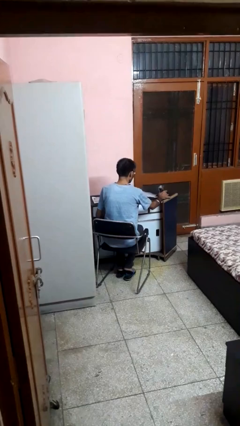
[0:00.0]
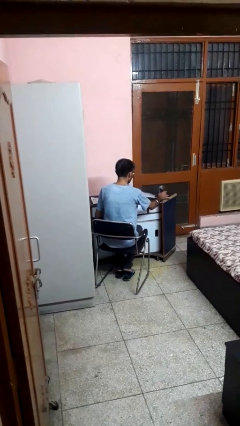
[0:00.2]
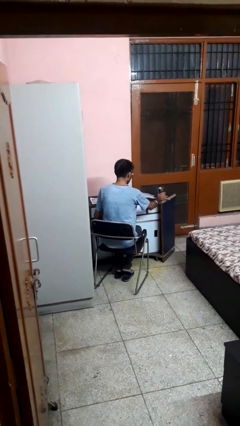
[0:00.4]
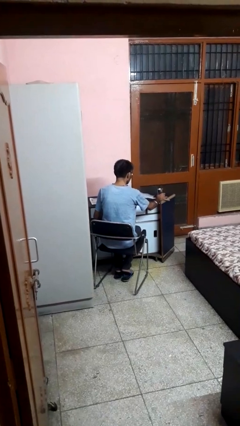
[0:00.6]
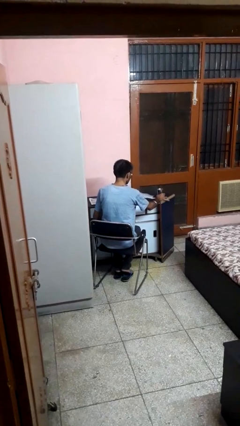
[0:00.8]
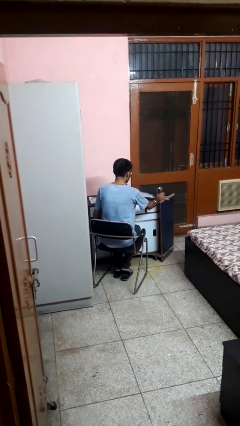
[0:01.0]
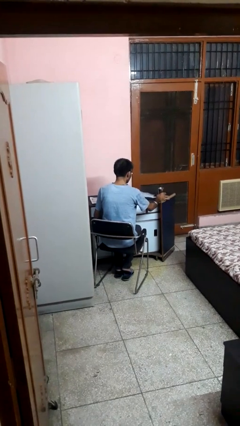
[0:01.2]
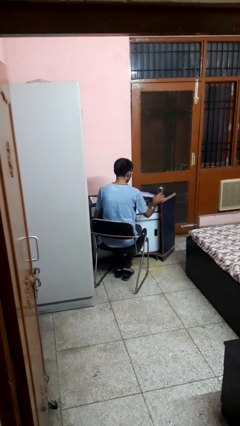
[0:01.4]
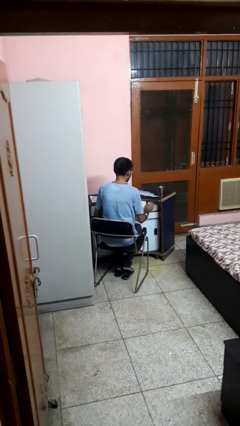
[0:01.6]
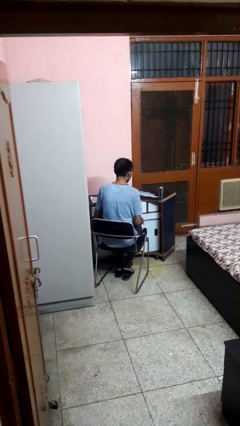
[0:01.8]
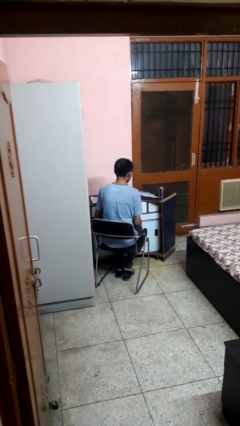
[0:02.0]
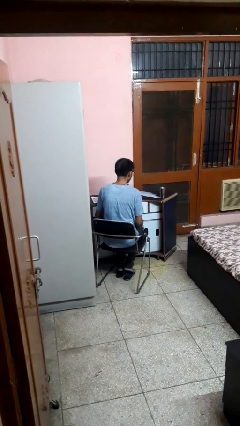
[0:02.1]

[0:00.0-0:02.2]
person sets upright glass

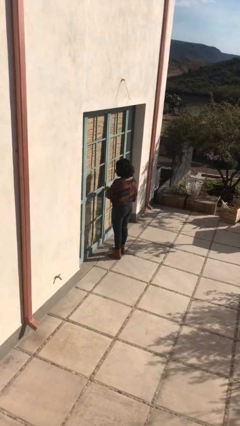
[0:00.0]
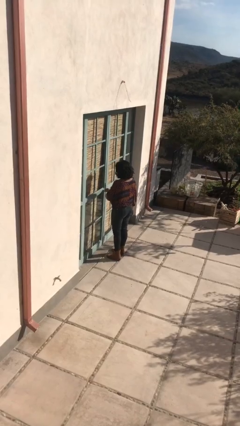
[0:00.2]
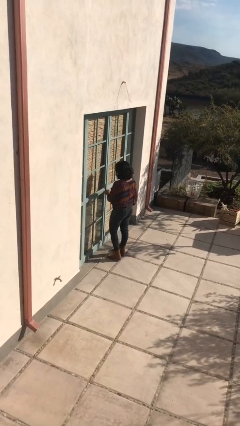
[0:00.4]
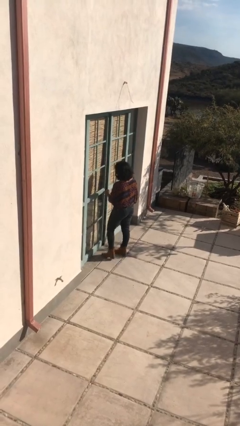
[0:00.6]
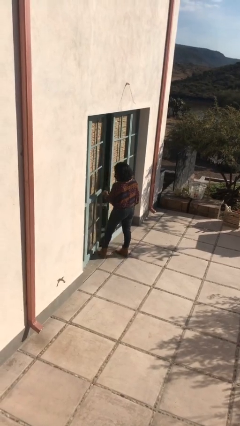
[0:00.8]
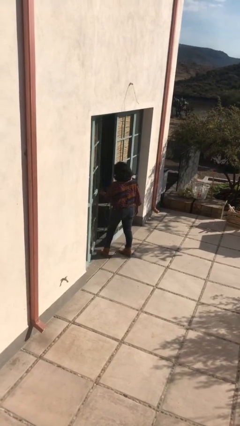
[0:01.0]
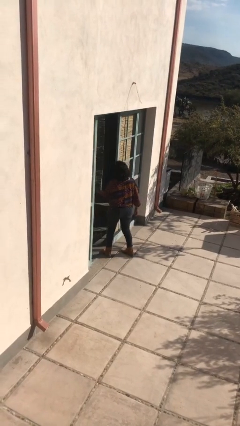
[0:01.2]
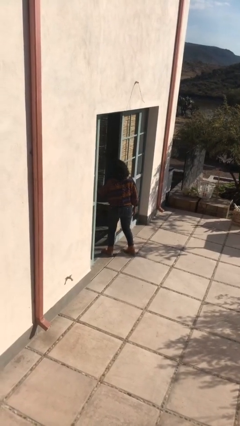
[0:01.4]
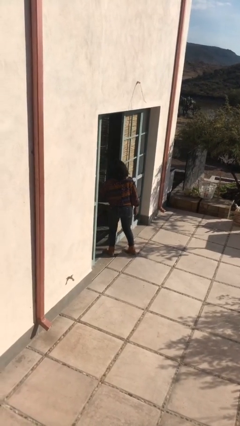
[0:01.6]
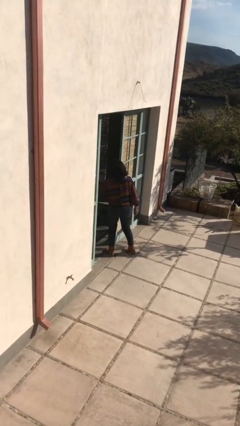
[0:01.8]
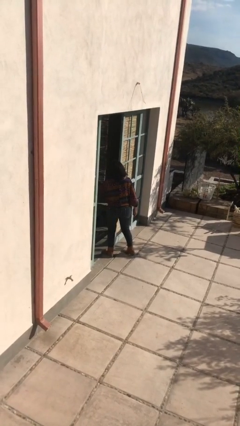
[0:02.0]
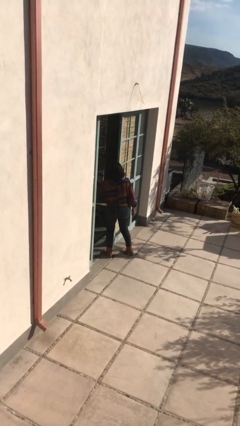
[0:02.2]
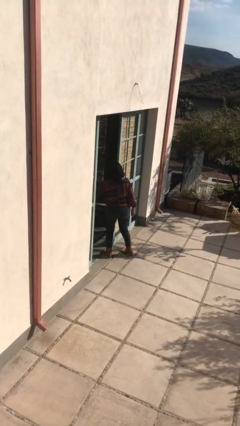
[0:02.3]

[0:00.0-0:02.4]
person opens facility door

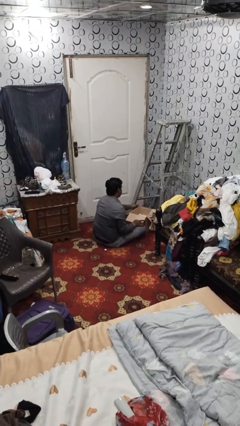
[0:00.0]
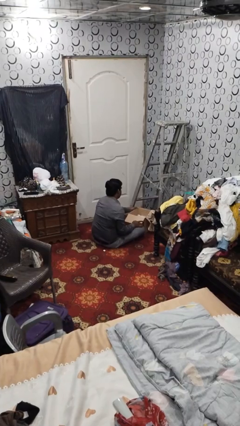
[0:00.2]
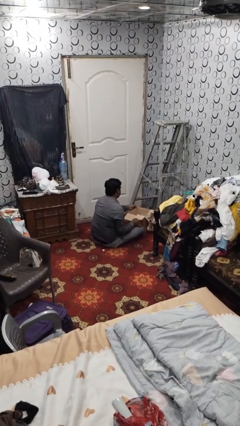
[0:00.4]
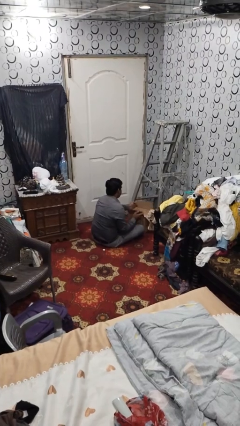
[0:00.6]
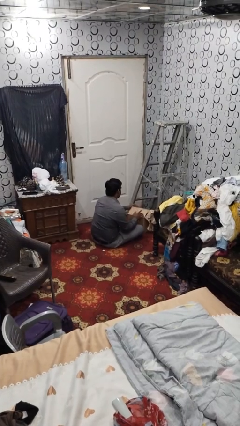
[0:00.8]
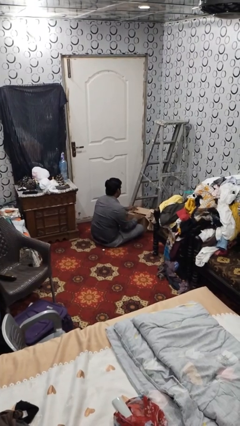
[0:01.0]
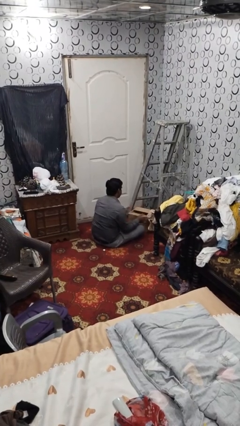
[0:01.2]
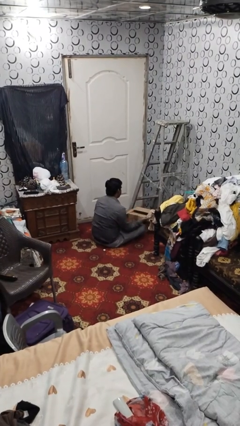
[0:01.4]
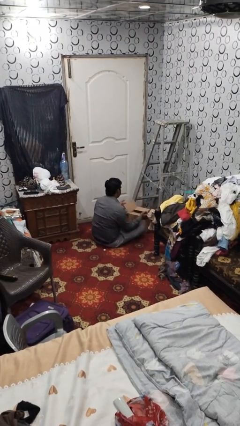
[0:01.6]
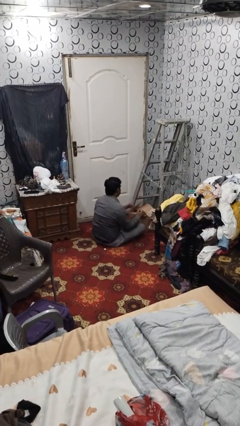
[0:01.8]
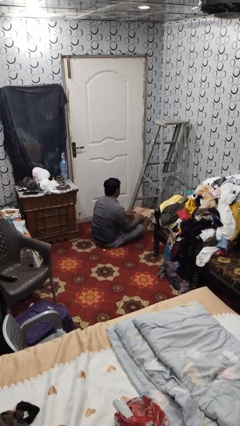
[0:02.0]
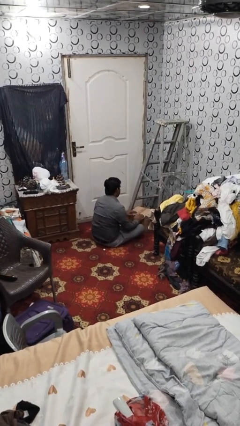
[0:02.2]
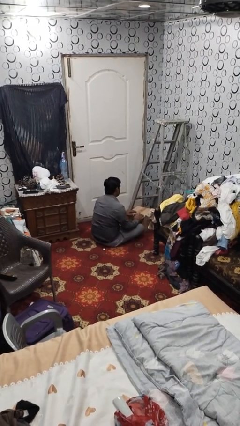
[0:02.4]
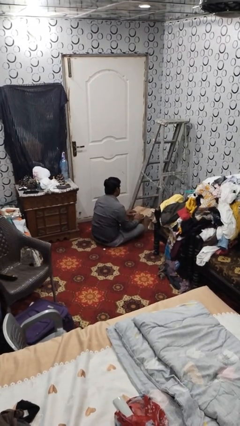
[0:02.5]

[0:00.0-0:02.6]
person closes box

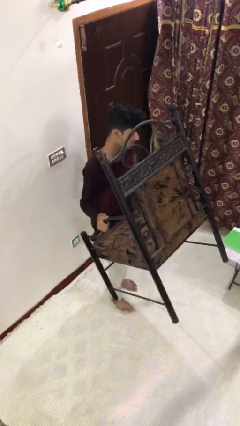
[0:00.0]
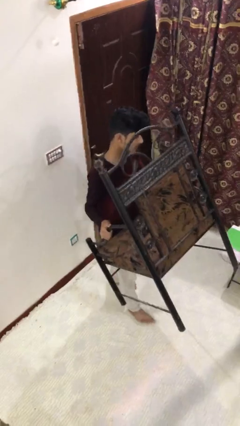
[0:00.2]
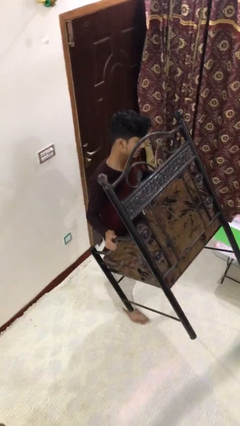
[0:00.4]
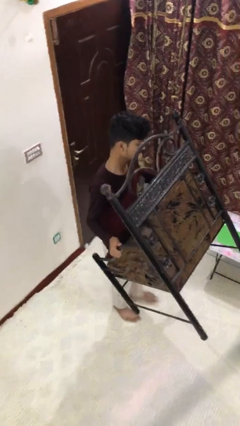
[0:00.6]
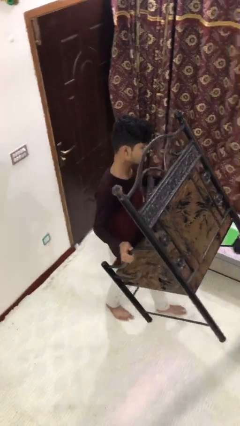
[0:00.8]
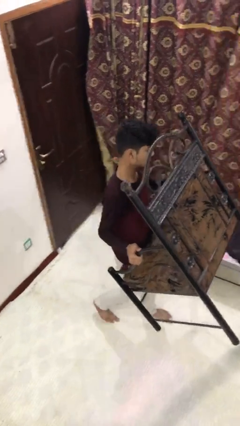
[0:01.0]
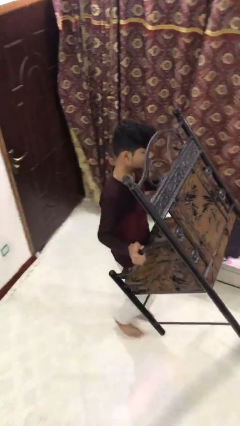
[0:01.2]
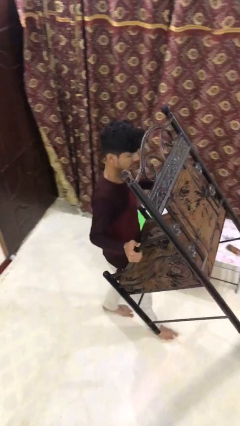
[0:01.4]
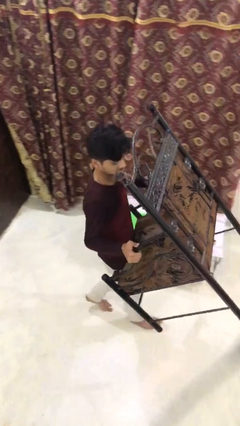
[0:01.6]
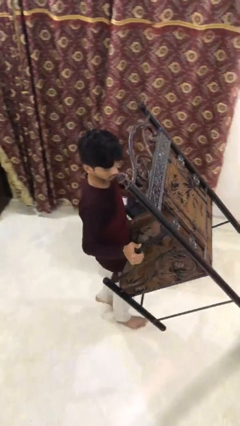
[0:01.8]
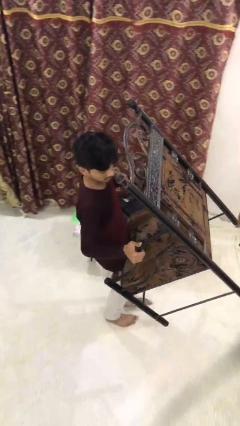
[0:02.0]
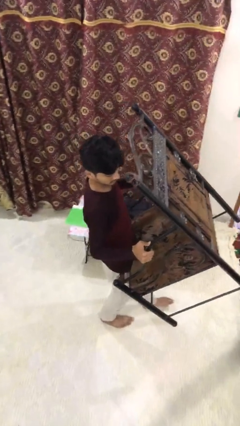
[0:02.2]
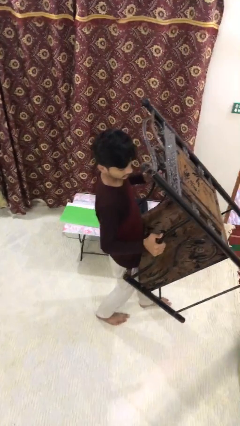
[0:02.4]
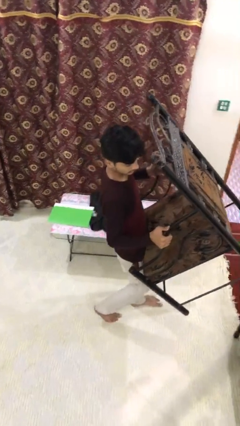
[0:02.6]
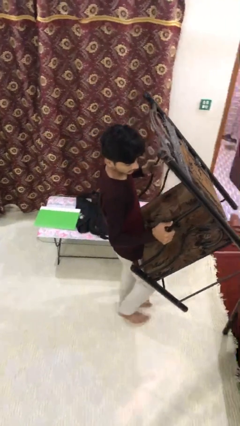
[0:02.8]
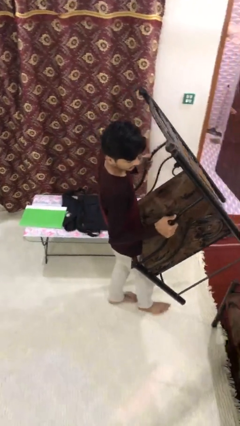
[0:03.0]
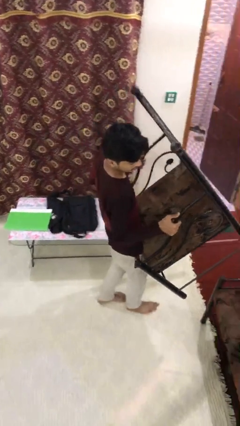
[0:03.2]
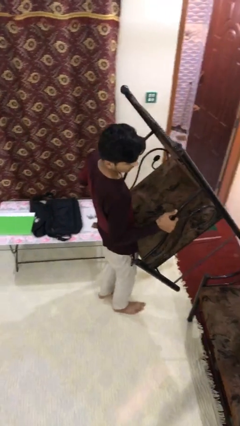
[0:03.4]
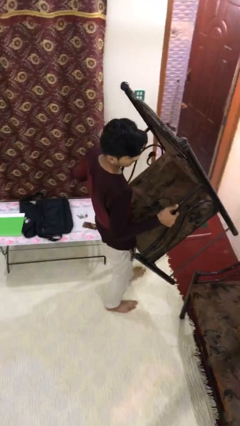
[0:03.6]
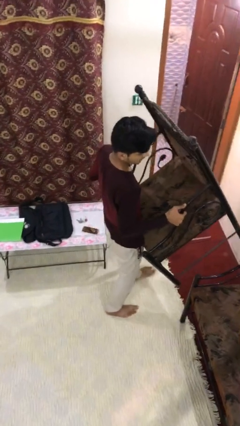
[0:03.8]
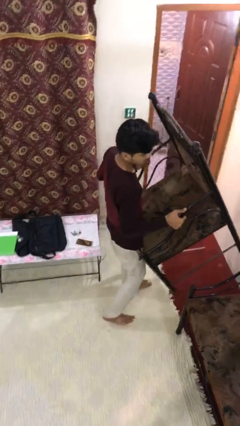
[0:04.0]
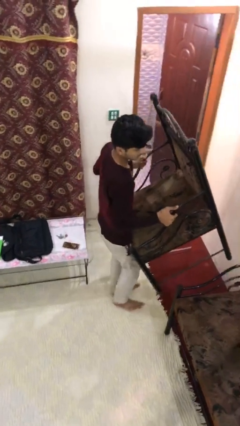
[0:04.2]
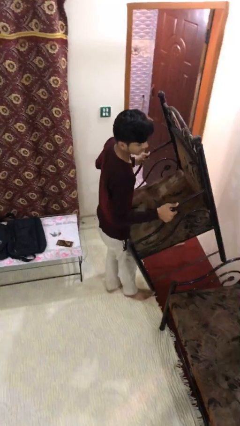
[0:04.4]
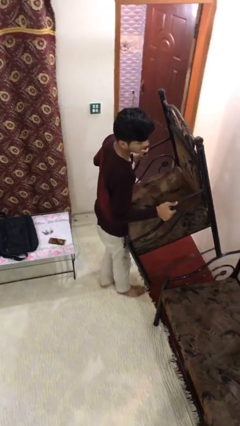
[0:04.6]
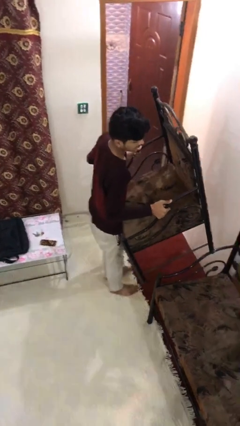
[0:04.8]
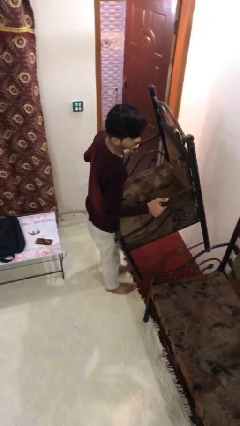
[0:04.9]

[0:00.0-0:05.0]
person carries heavy object

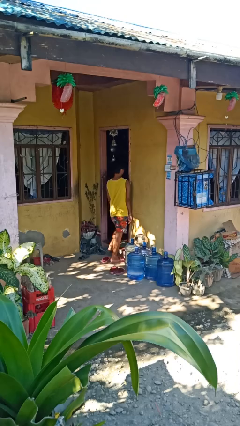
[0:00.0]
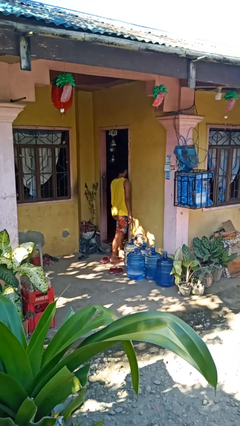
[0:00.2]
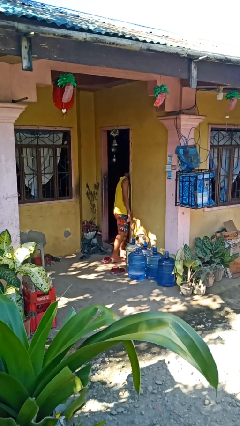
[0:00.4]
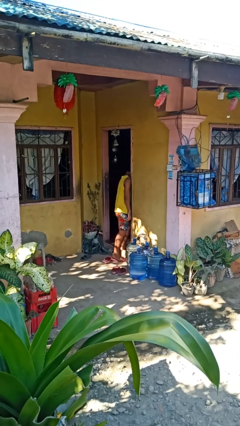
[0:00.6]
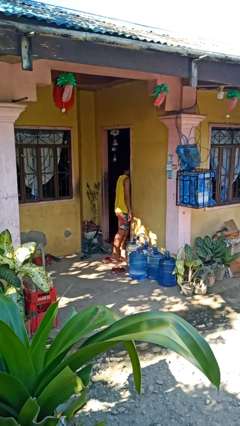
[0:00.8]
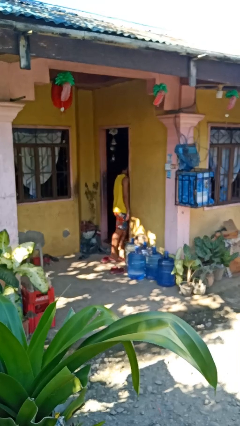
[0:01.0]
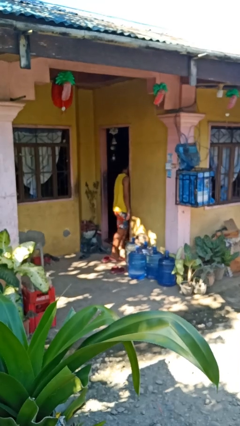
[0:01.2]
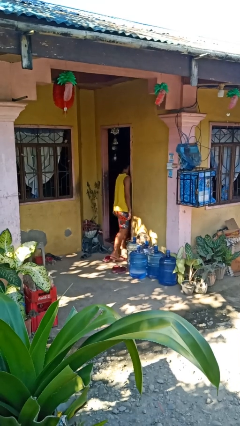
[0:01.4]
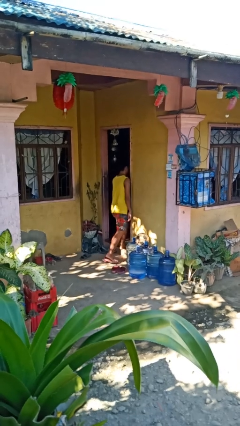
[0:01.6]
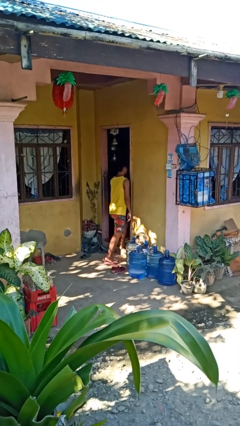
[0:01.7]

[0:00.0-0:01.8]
person bumps into wall

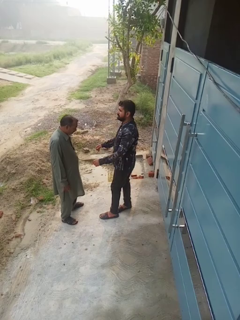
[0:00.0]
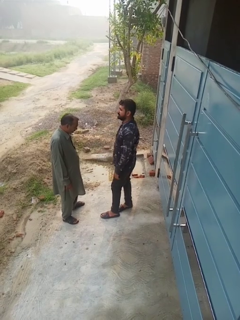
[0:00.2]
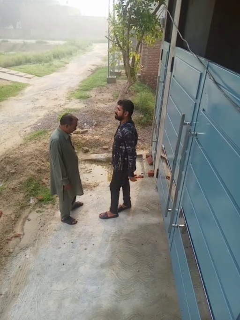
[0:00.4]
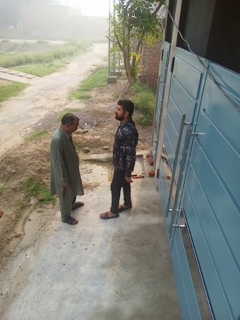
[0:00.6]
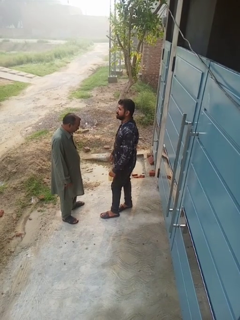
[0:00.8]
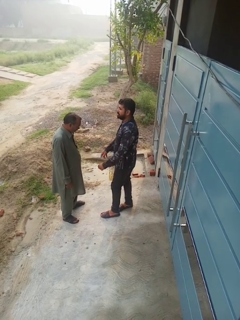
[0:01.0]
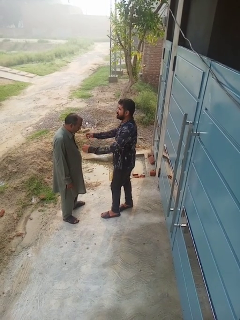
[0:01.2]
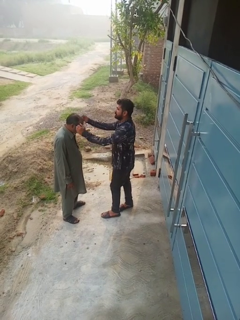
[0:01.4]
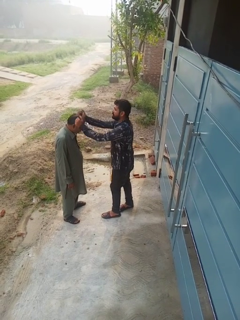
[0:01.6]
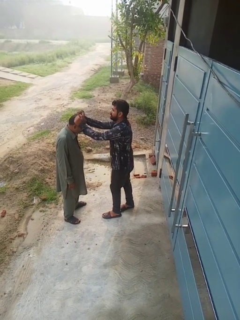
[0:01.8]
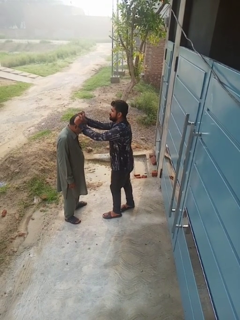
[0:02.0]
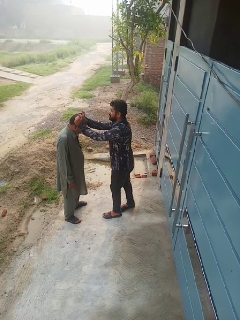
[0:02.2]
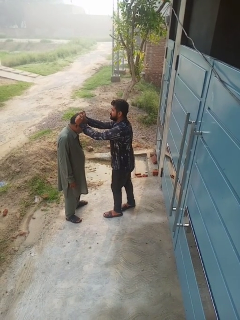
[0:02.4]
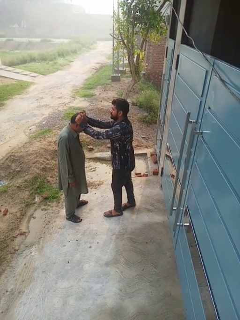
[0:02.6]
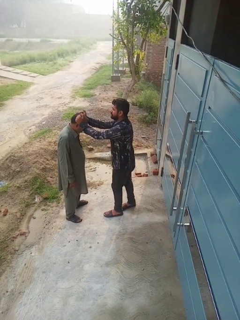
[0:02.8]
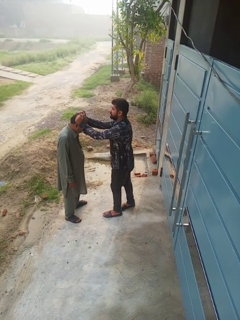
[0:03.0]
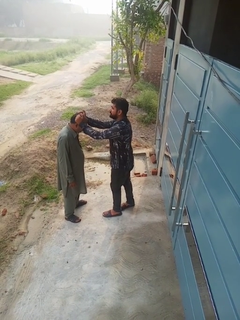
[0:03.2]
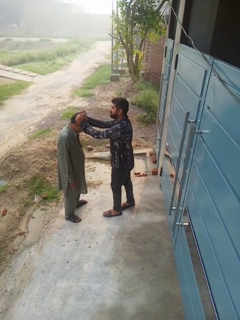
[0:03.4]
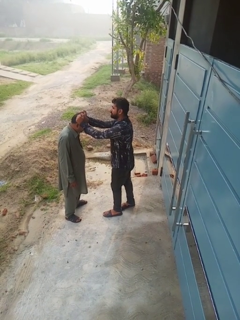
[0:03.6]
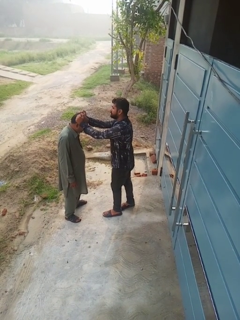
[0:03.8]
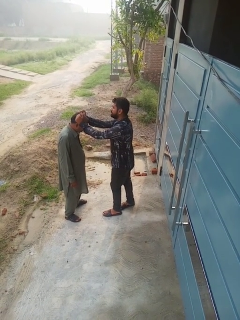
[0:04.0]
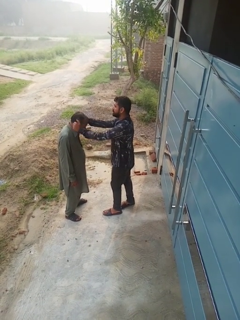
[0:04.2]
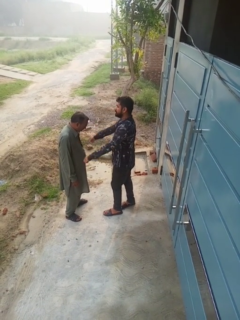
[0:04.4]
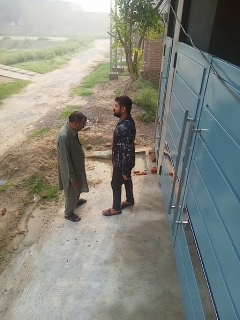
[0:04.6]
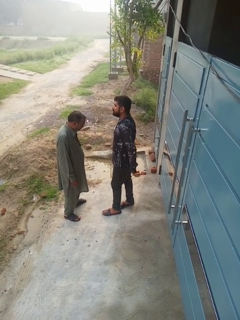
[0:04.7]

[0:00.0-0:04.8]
person grabs person by hair
